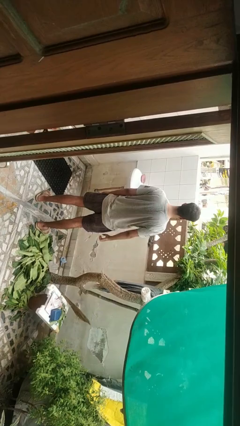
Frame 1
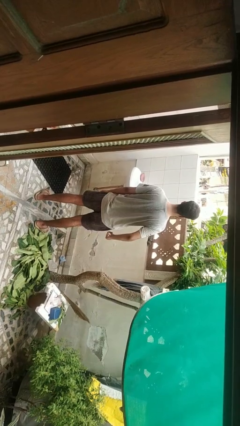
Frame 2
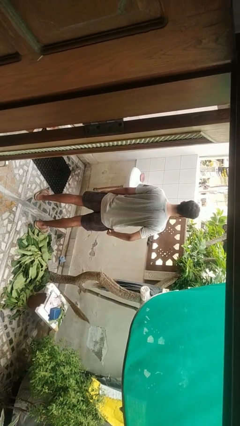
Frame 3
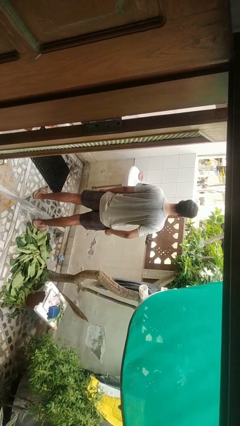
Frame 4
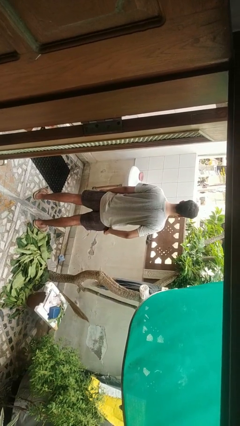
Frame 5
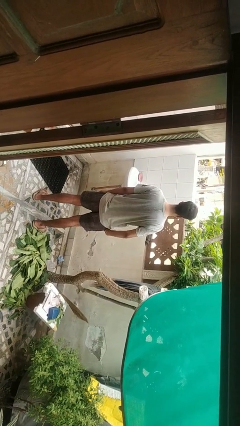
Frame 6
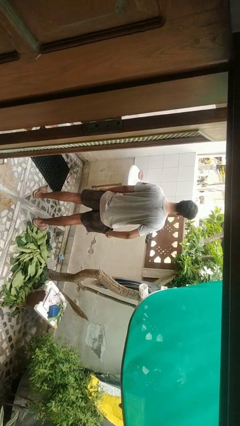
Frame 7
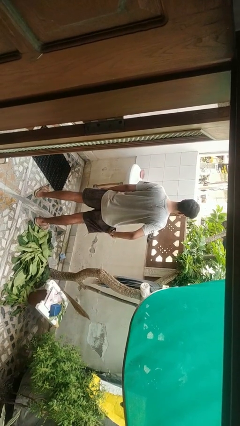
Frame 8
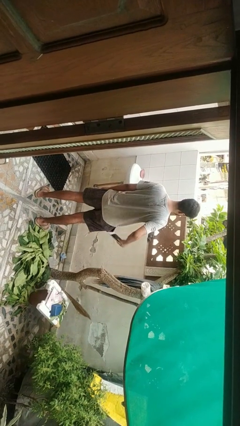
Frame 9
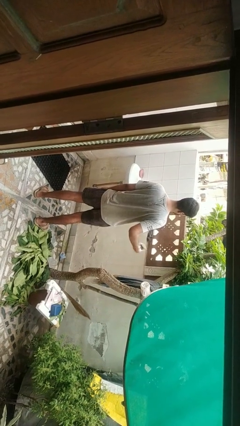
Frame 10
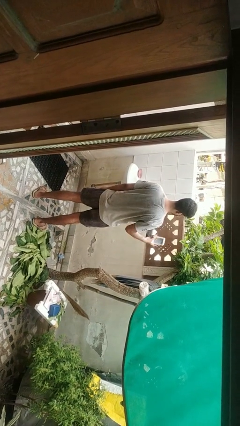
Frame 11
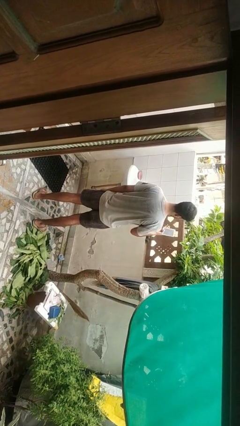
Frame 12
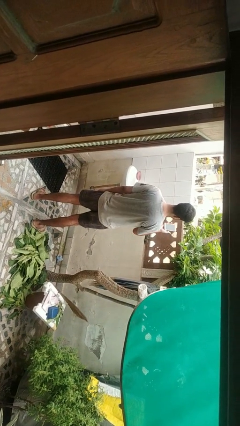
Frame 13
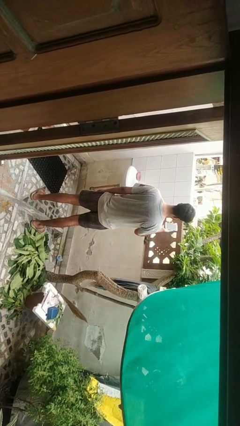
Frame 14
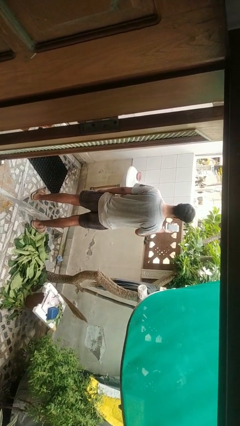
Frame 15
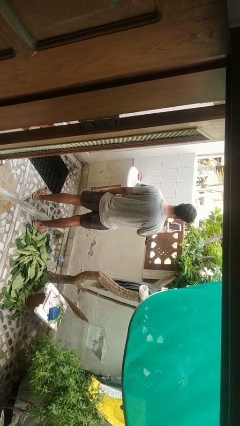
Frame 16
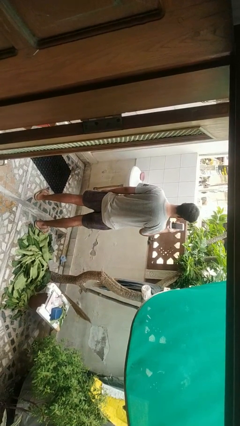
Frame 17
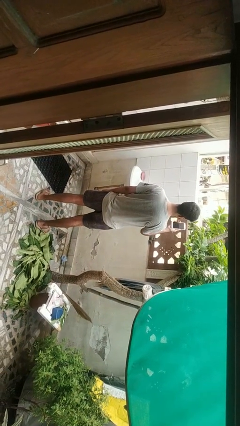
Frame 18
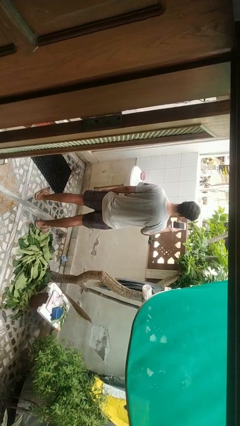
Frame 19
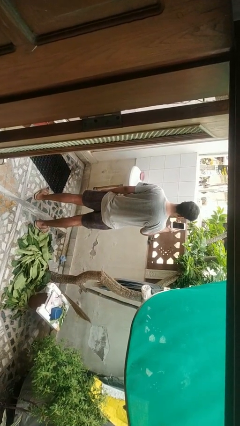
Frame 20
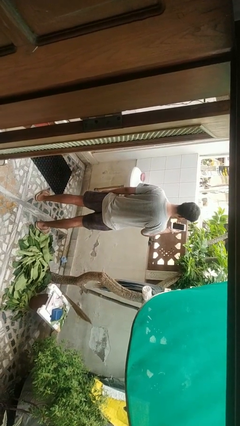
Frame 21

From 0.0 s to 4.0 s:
person takes phone from pocket

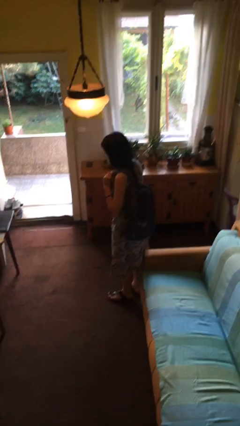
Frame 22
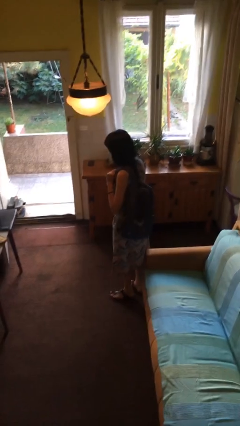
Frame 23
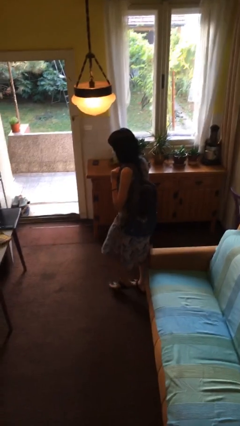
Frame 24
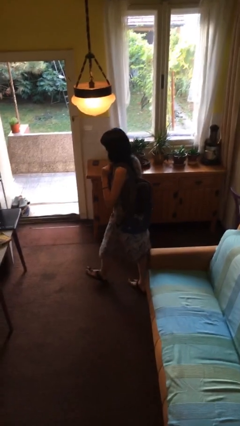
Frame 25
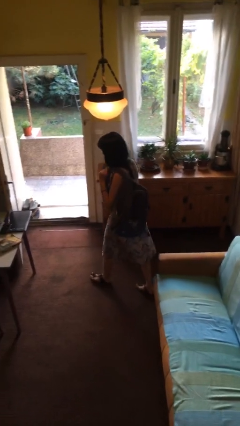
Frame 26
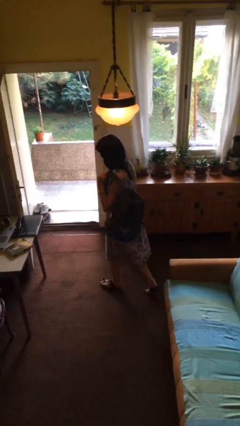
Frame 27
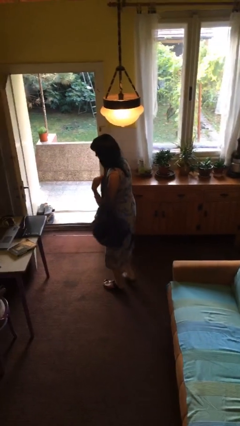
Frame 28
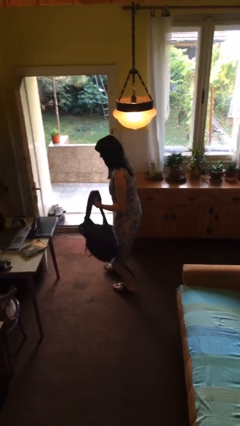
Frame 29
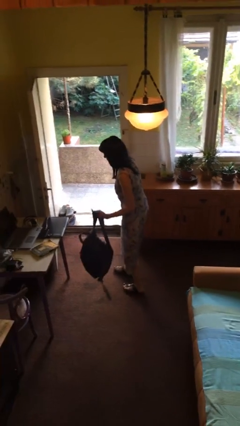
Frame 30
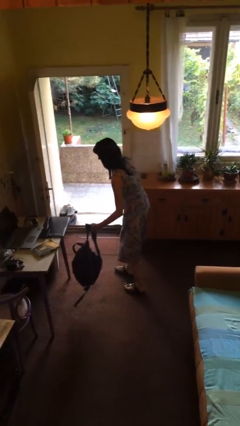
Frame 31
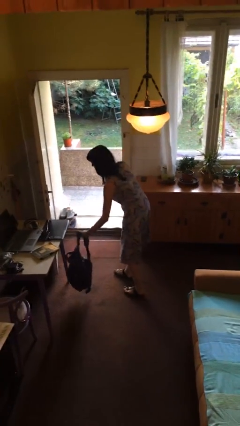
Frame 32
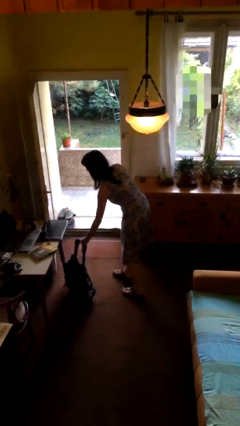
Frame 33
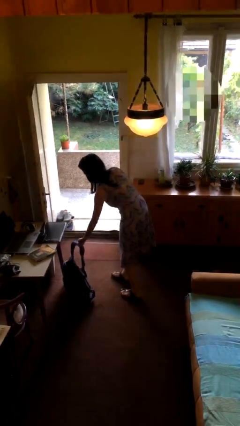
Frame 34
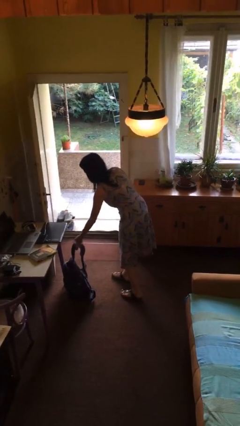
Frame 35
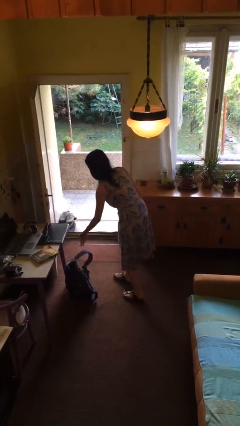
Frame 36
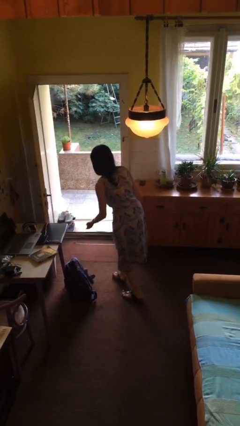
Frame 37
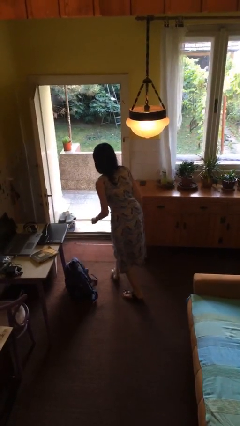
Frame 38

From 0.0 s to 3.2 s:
person puts down object on floor

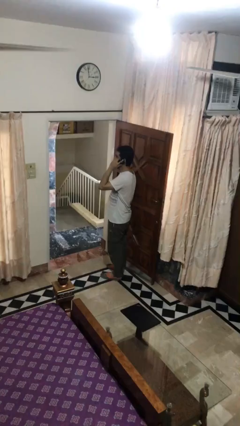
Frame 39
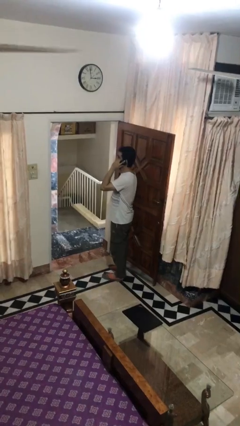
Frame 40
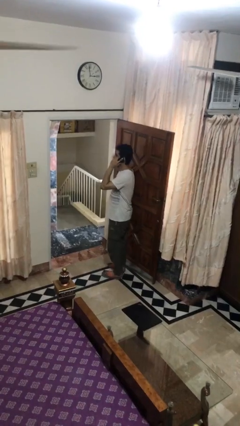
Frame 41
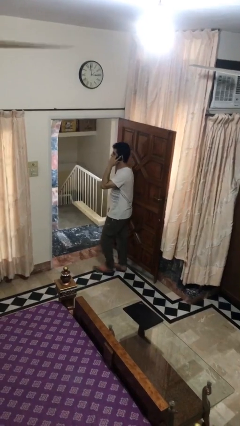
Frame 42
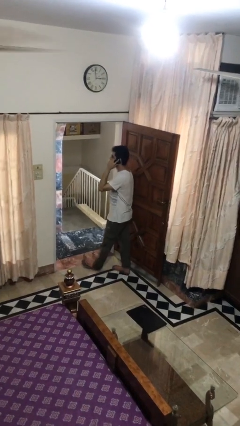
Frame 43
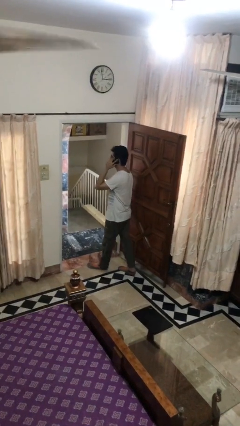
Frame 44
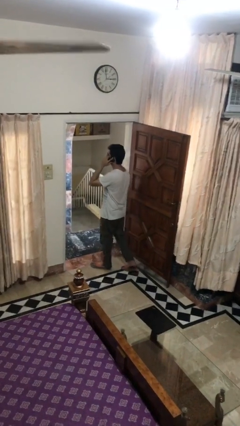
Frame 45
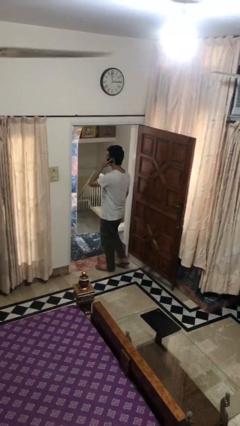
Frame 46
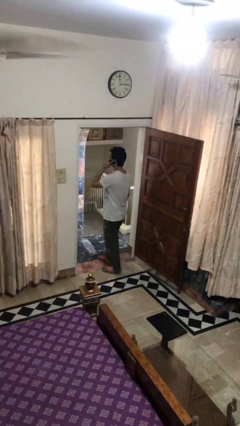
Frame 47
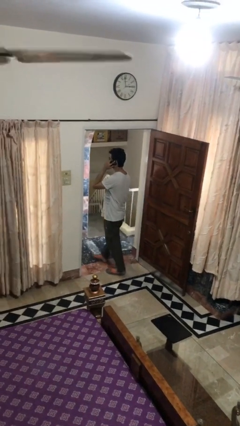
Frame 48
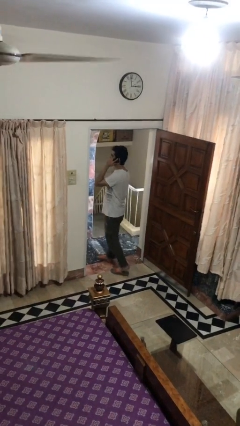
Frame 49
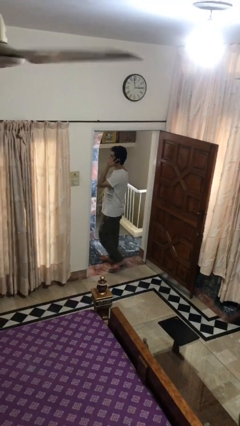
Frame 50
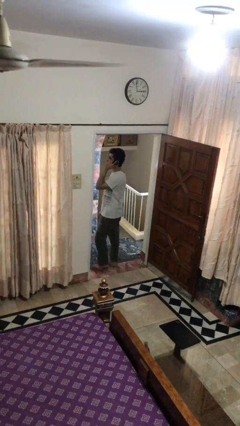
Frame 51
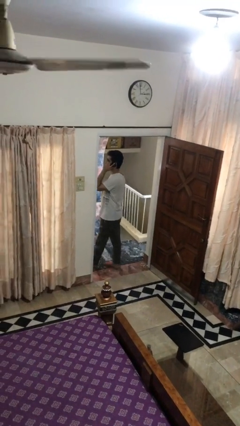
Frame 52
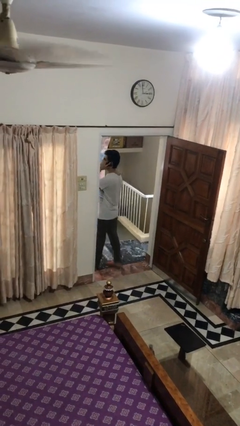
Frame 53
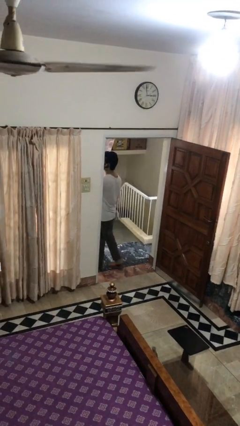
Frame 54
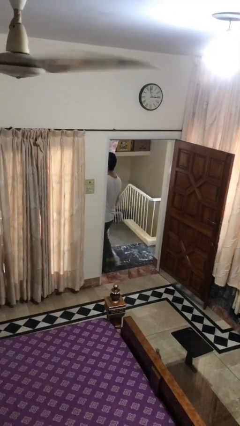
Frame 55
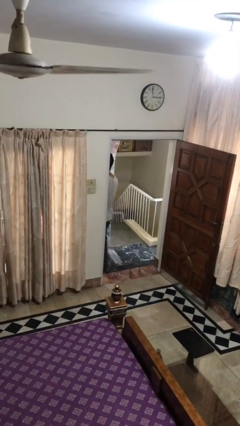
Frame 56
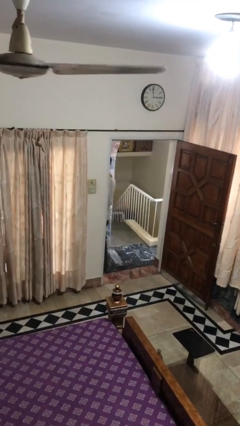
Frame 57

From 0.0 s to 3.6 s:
person exits scene through structure

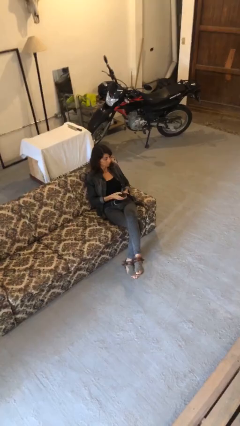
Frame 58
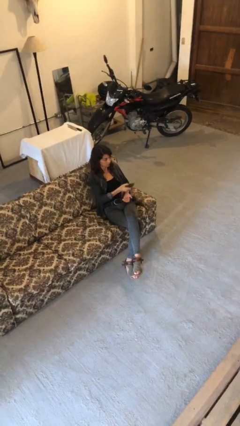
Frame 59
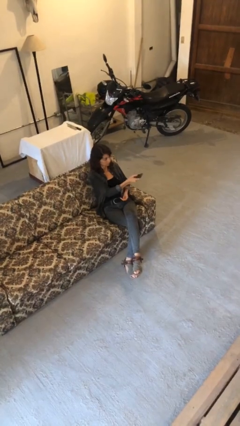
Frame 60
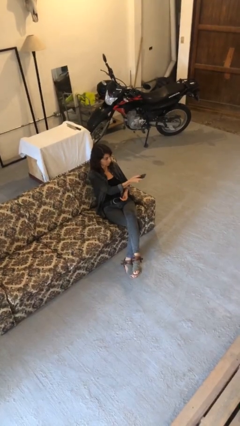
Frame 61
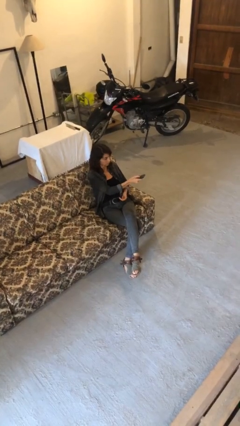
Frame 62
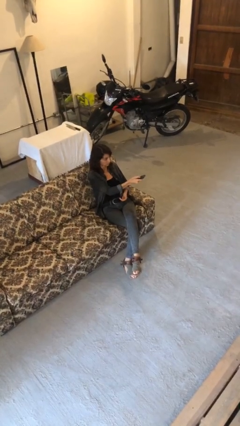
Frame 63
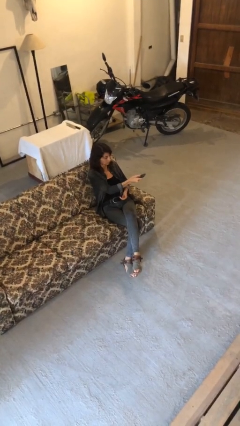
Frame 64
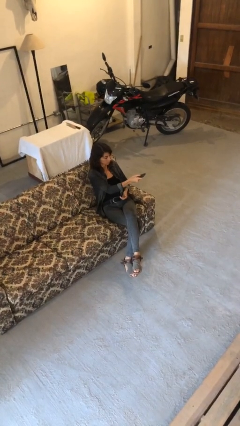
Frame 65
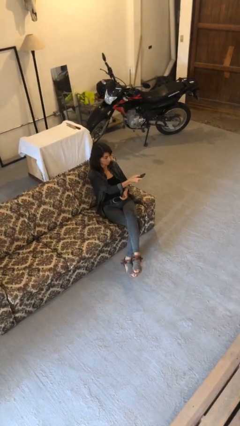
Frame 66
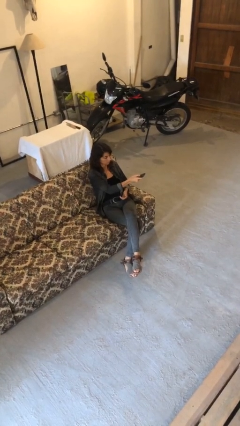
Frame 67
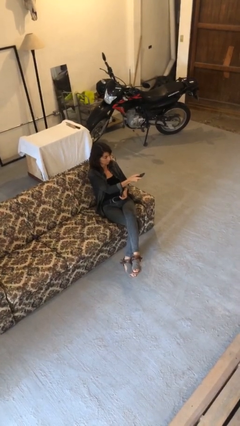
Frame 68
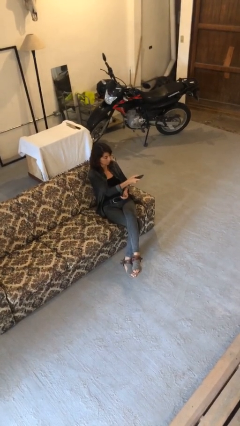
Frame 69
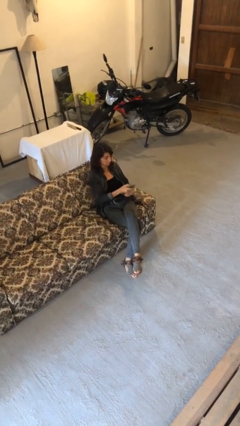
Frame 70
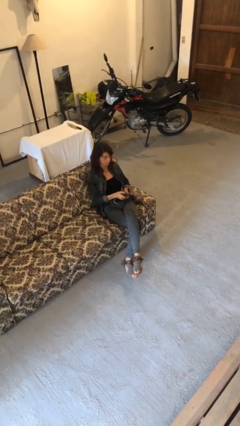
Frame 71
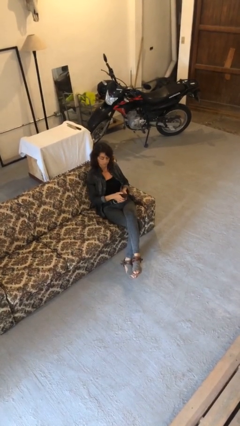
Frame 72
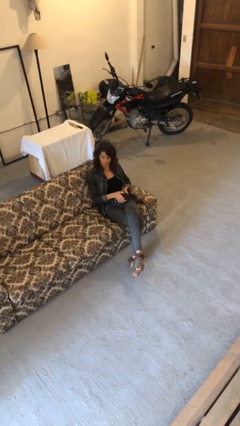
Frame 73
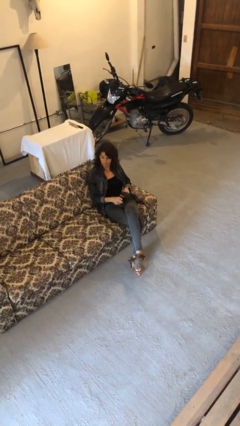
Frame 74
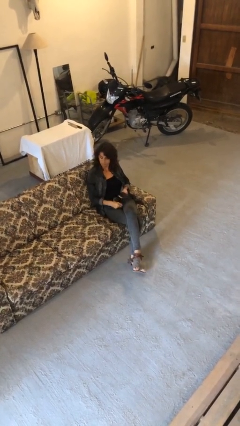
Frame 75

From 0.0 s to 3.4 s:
person uses television remote

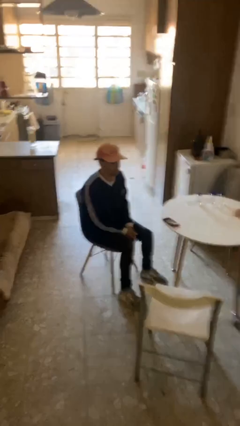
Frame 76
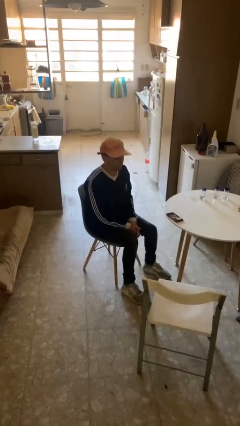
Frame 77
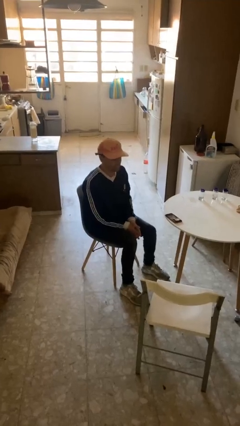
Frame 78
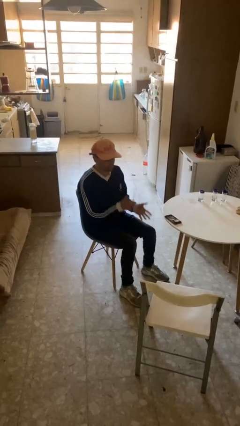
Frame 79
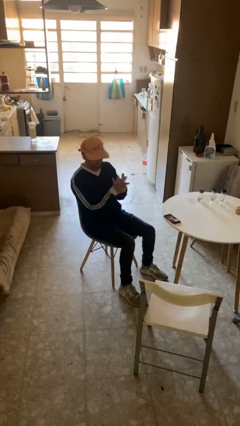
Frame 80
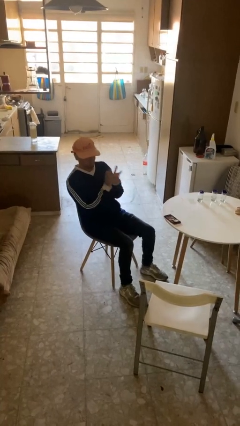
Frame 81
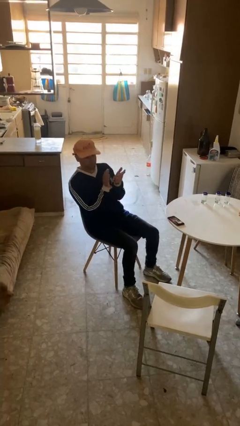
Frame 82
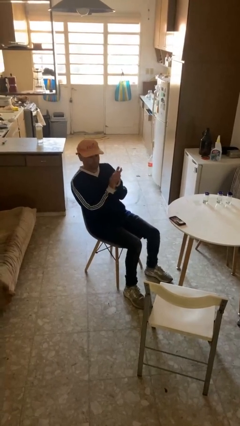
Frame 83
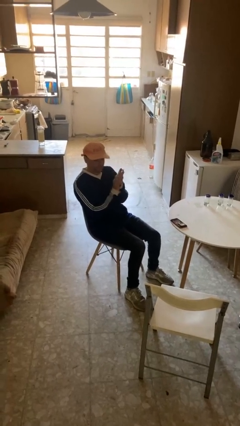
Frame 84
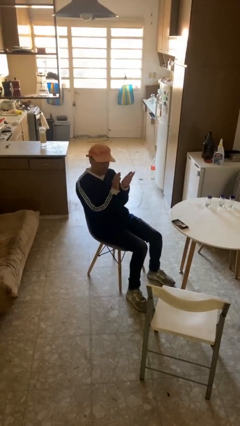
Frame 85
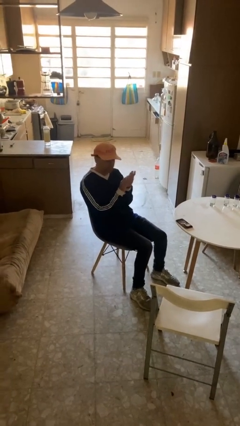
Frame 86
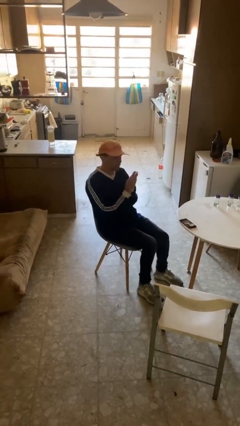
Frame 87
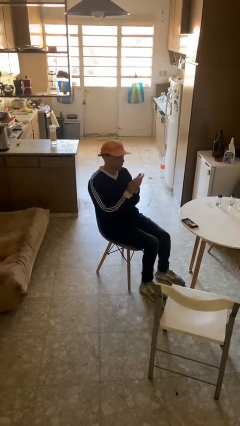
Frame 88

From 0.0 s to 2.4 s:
person claps hands

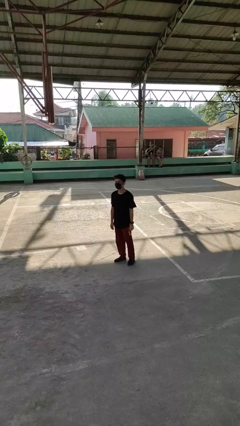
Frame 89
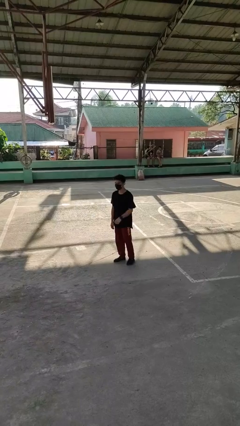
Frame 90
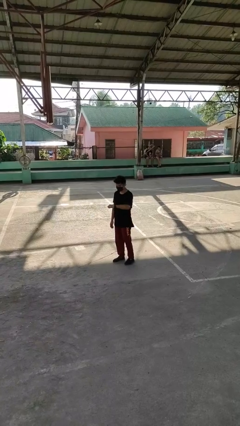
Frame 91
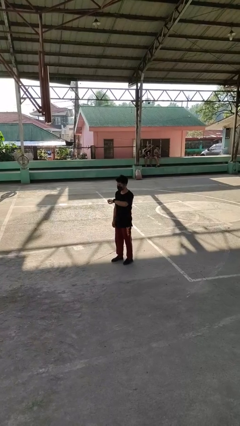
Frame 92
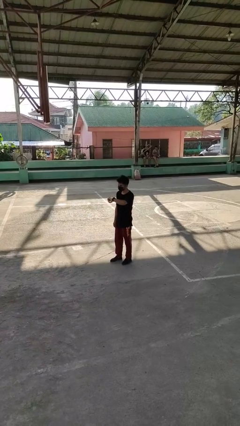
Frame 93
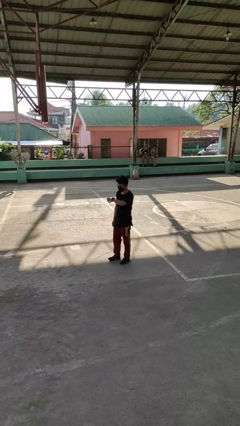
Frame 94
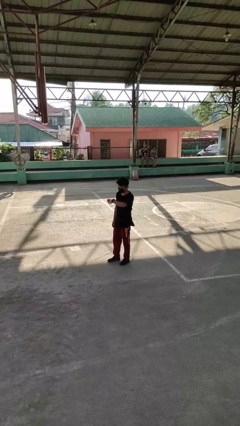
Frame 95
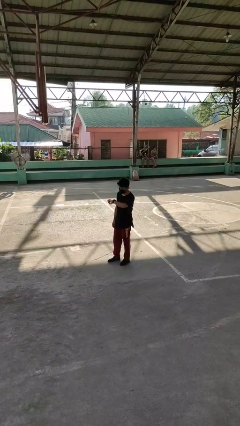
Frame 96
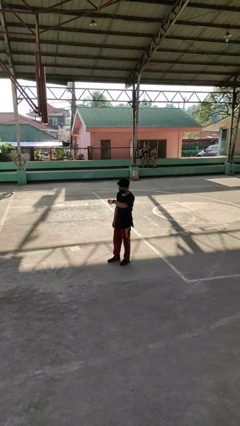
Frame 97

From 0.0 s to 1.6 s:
person looks at wristwatch
